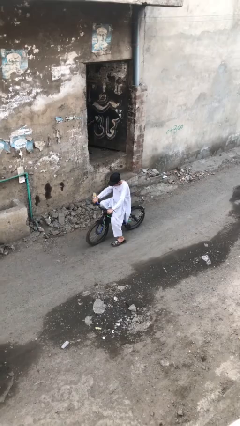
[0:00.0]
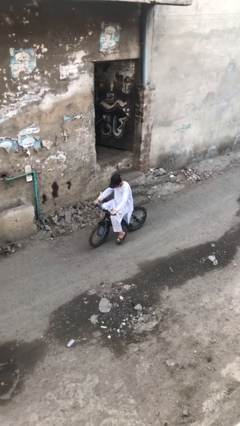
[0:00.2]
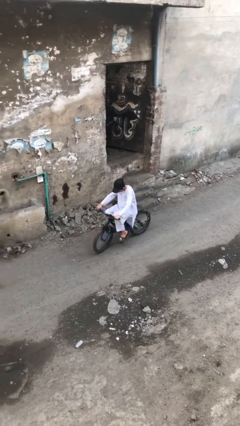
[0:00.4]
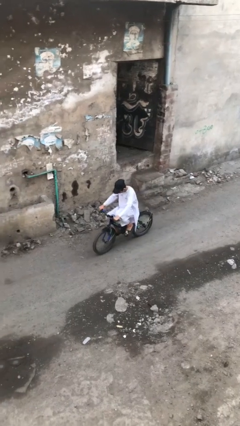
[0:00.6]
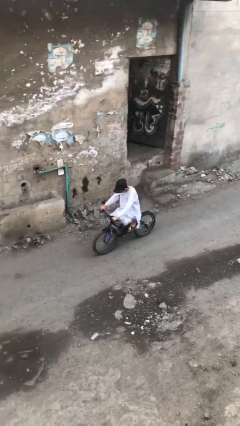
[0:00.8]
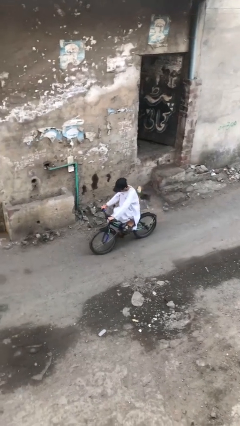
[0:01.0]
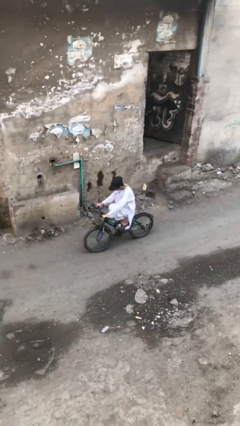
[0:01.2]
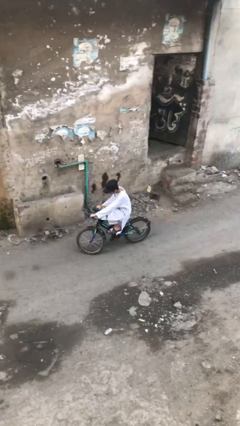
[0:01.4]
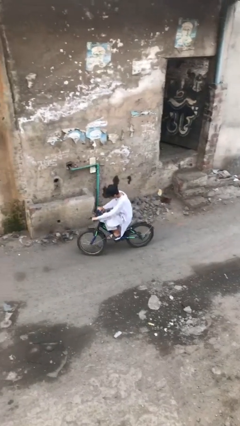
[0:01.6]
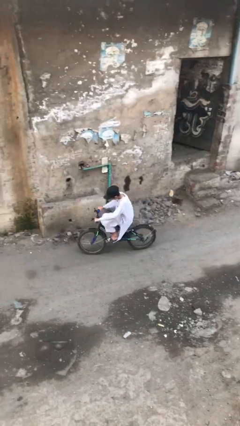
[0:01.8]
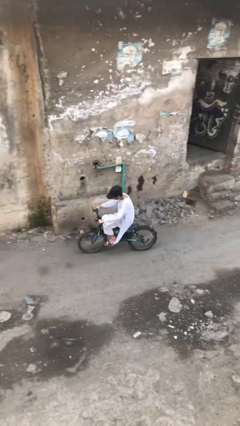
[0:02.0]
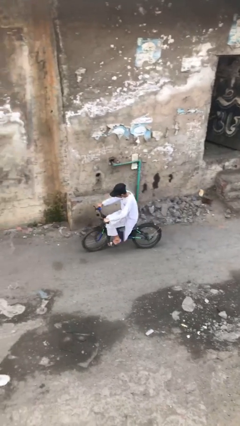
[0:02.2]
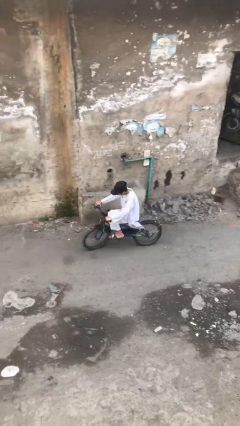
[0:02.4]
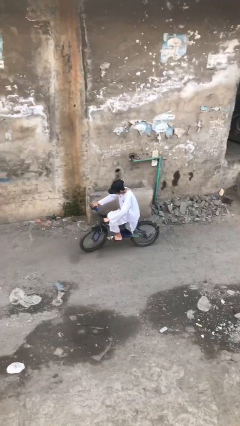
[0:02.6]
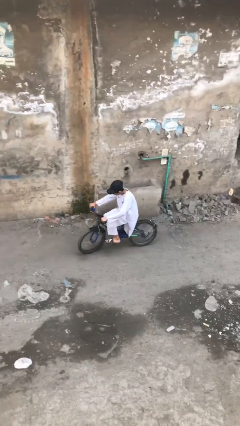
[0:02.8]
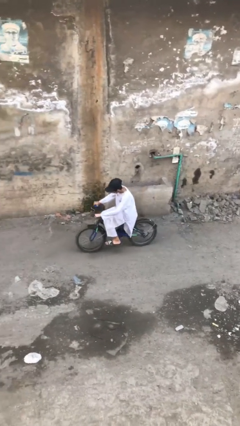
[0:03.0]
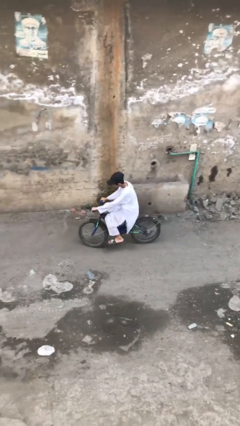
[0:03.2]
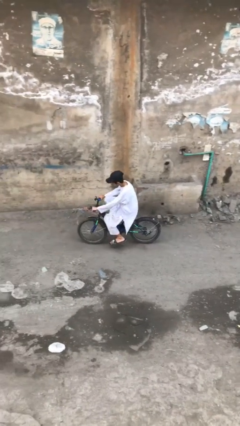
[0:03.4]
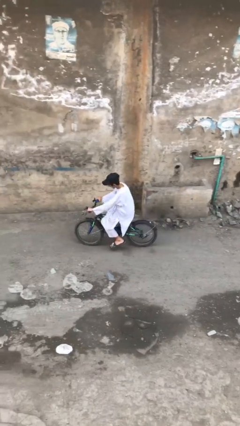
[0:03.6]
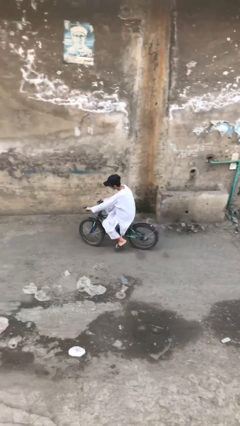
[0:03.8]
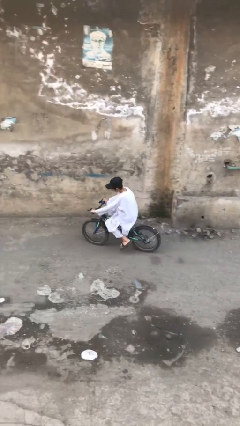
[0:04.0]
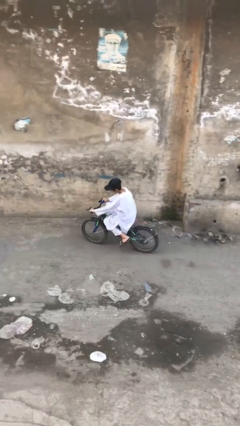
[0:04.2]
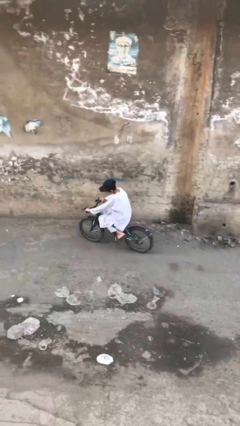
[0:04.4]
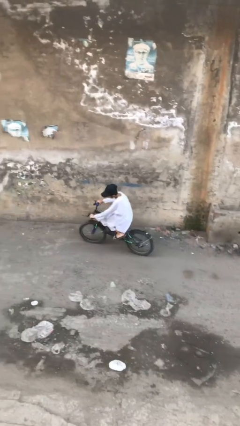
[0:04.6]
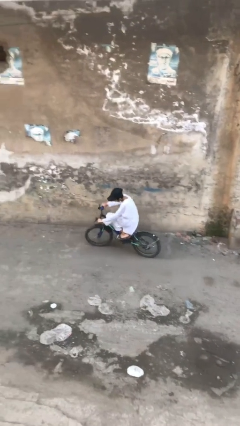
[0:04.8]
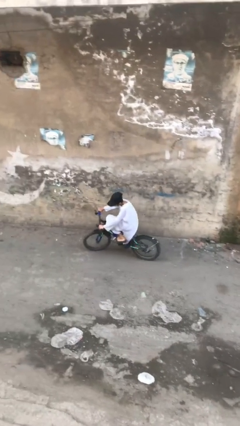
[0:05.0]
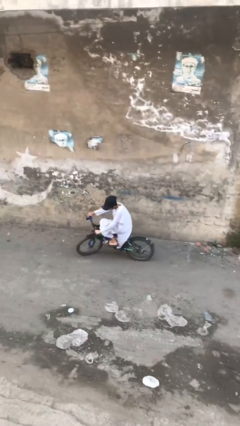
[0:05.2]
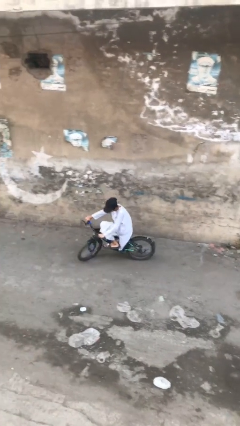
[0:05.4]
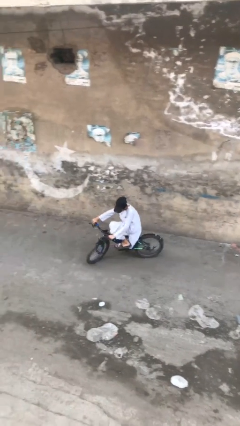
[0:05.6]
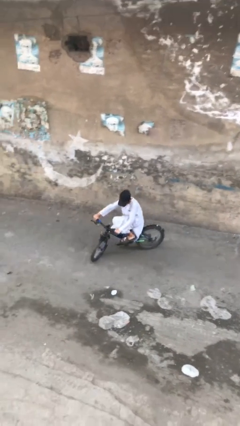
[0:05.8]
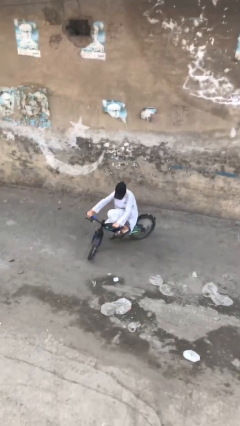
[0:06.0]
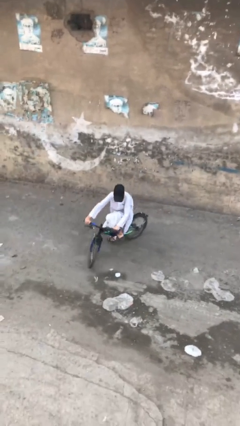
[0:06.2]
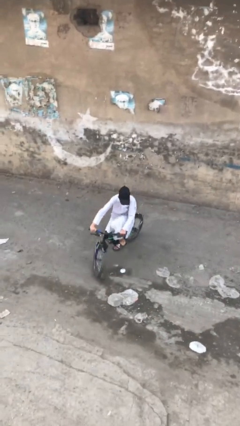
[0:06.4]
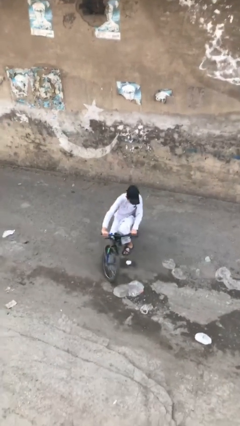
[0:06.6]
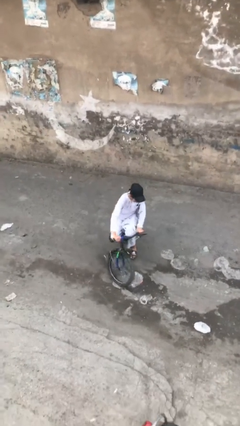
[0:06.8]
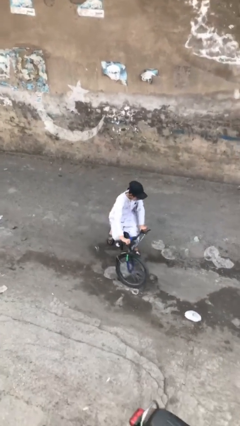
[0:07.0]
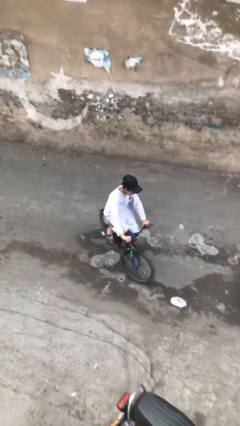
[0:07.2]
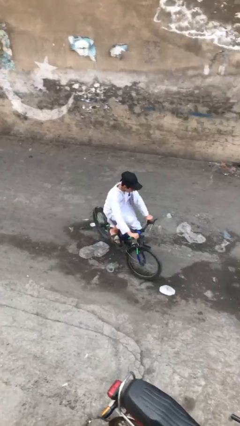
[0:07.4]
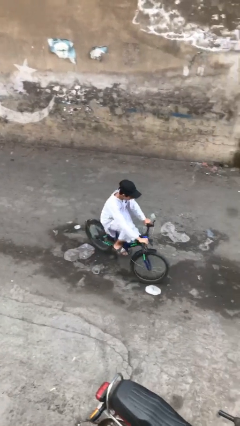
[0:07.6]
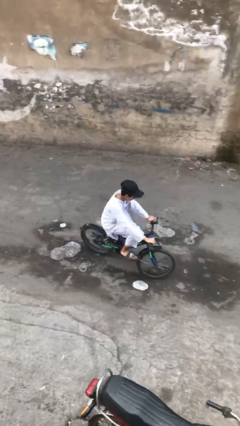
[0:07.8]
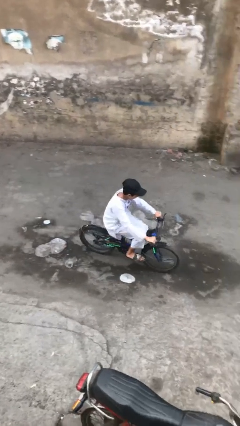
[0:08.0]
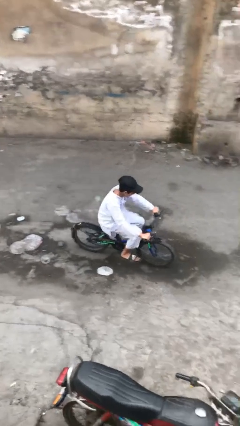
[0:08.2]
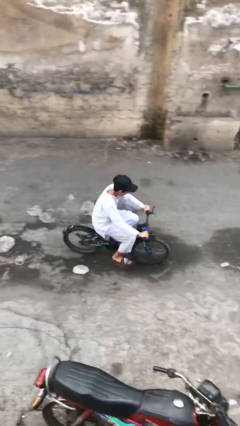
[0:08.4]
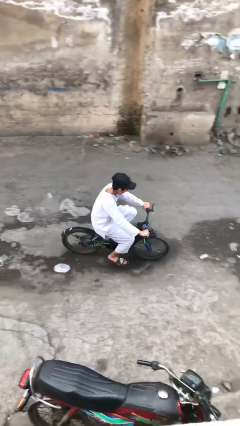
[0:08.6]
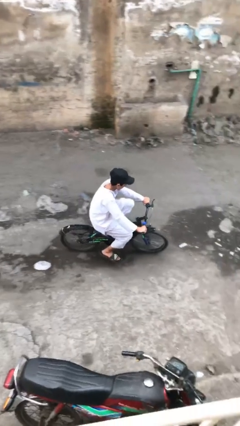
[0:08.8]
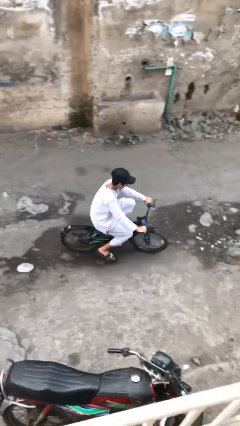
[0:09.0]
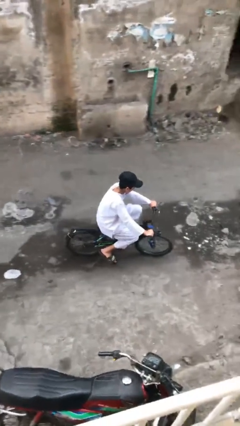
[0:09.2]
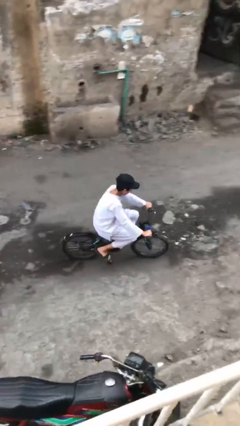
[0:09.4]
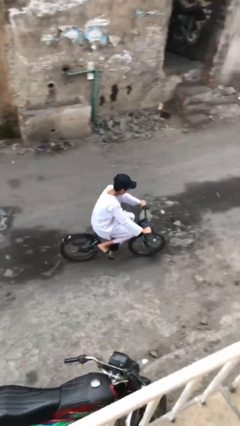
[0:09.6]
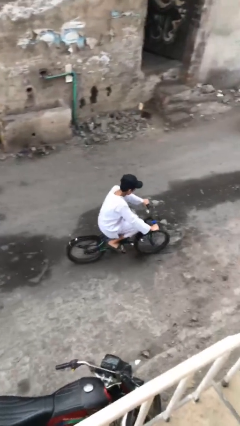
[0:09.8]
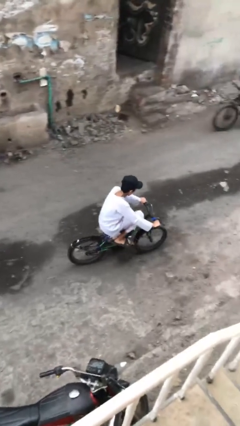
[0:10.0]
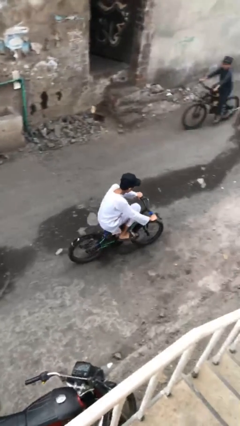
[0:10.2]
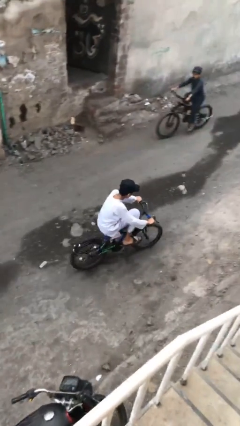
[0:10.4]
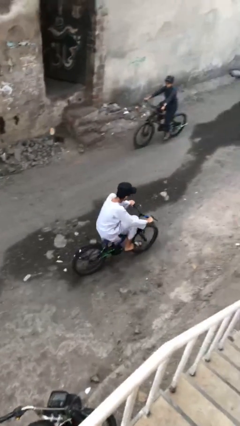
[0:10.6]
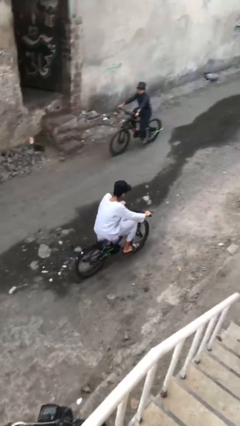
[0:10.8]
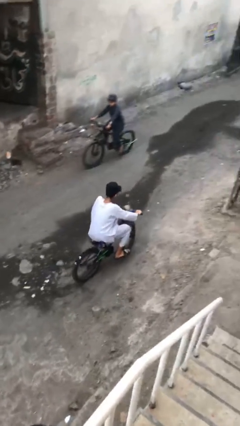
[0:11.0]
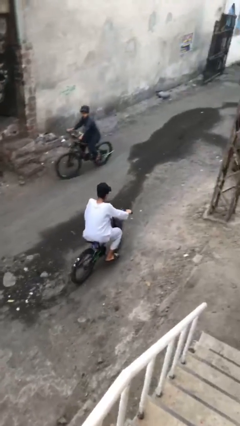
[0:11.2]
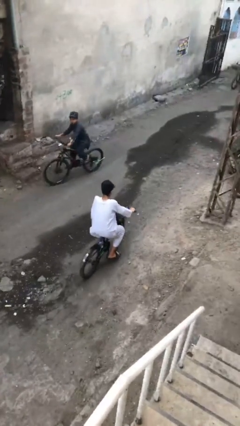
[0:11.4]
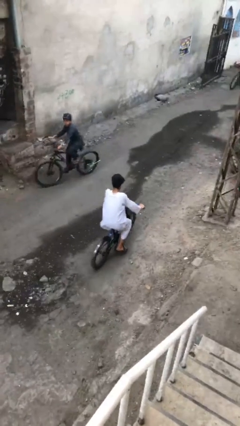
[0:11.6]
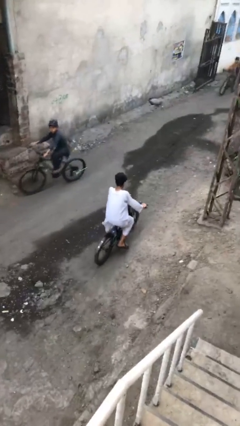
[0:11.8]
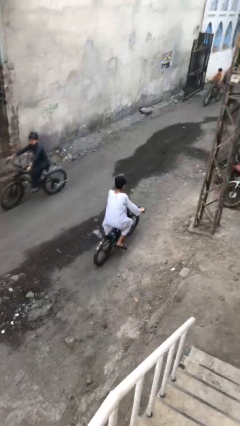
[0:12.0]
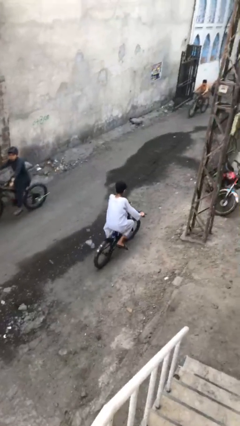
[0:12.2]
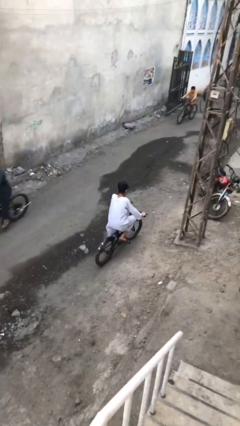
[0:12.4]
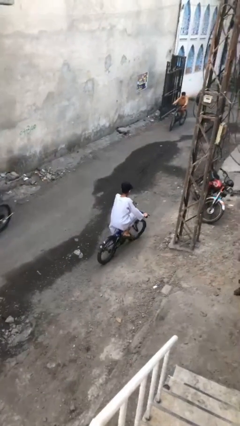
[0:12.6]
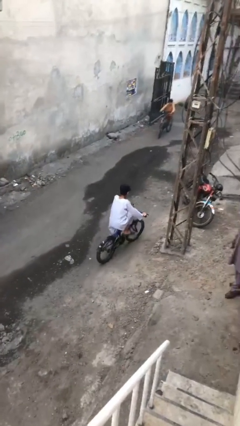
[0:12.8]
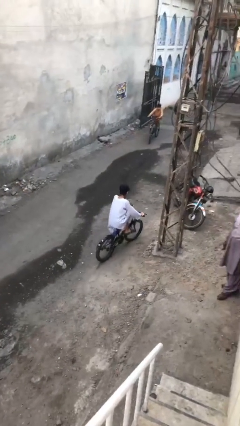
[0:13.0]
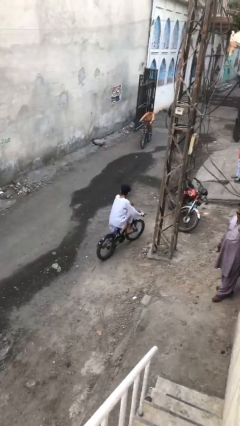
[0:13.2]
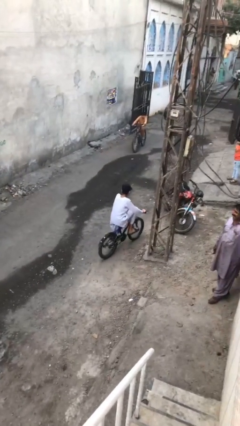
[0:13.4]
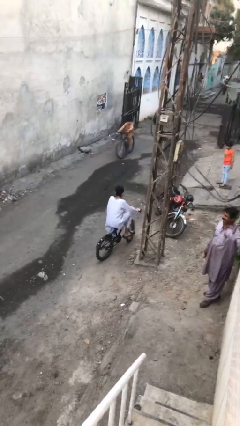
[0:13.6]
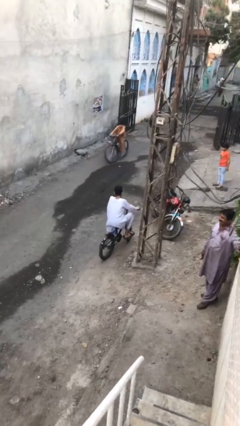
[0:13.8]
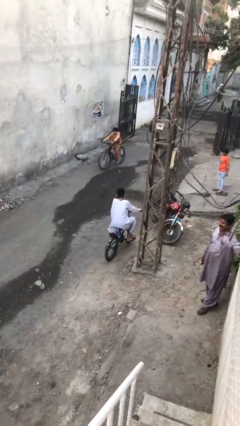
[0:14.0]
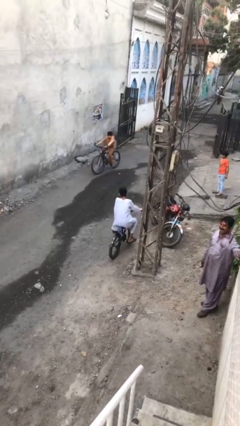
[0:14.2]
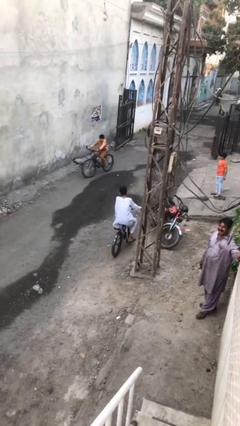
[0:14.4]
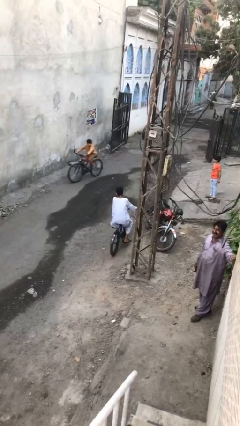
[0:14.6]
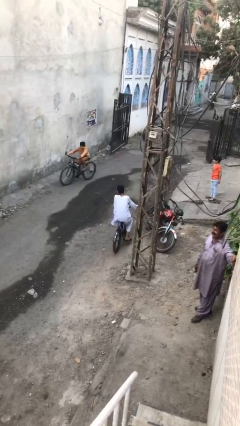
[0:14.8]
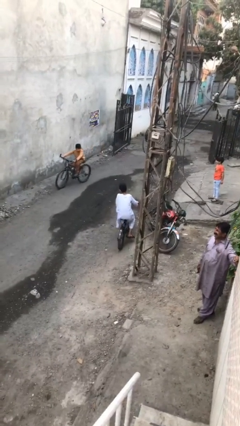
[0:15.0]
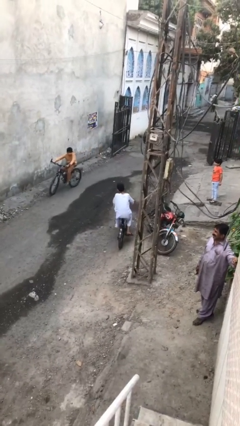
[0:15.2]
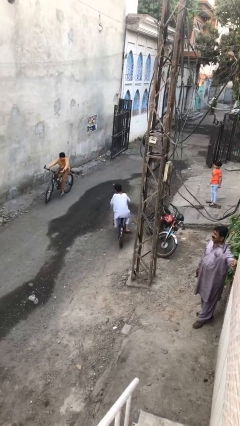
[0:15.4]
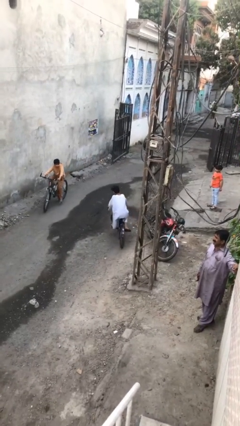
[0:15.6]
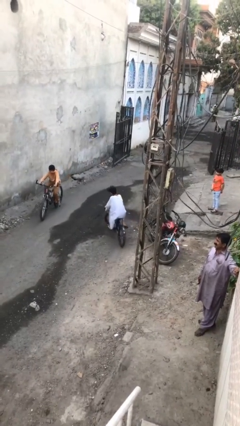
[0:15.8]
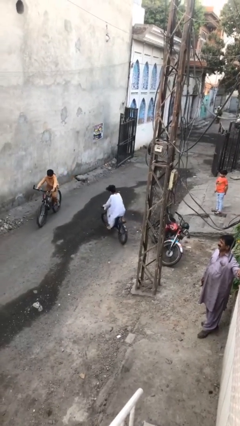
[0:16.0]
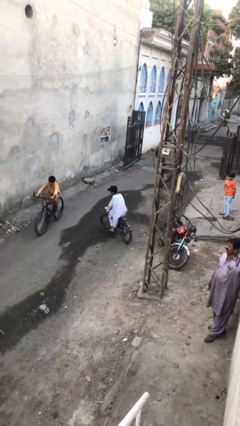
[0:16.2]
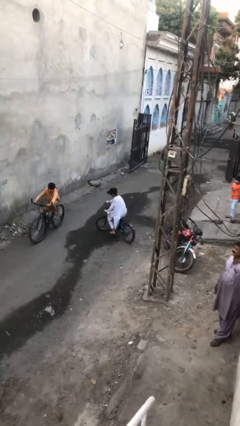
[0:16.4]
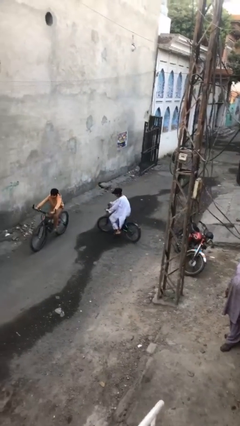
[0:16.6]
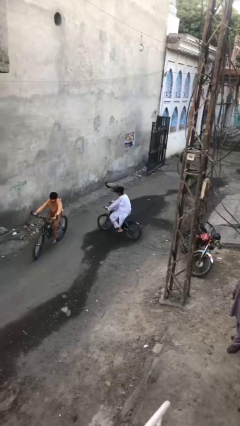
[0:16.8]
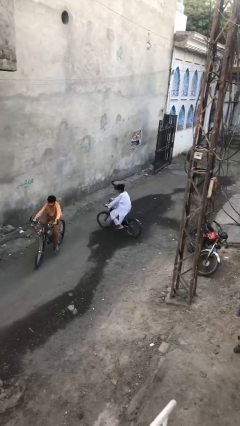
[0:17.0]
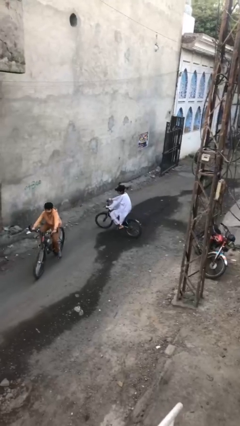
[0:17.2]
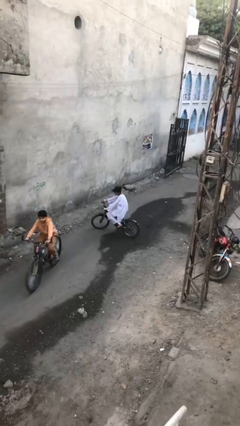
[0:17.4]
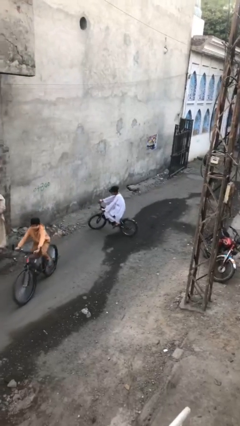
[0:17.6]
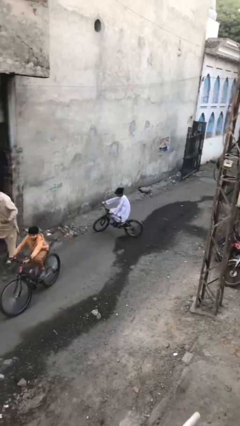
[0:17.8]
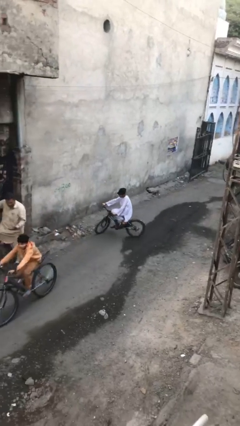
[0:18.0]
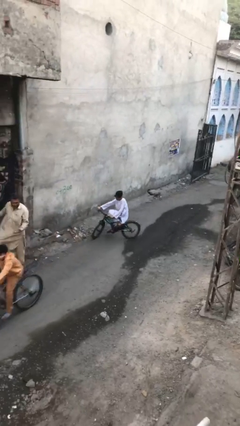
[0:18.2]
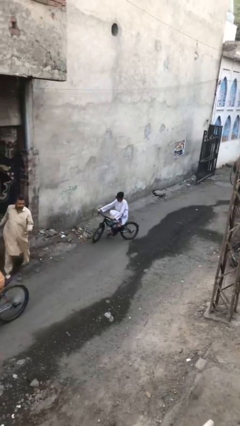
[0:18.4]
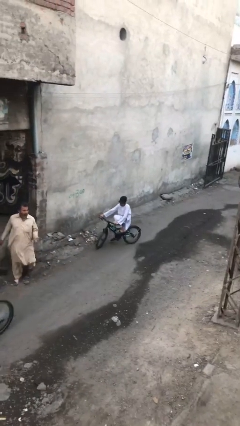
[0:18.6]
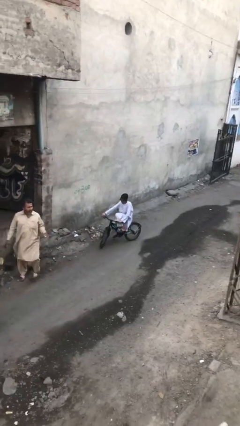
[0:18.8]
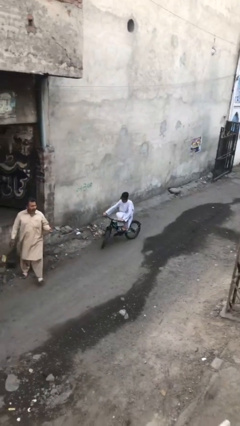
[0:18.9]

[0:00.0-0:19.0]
person rides bicycle
